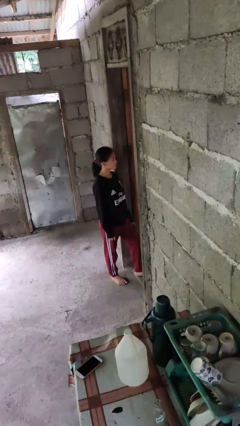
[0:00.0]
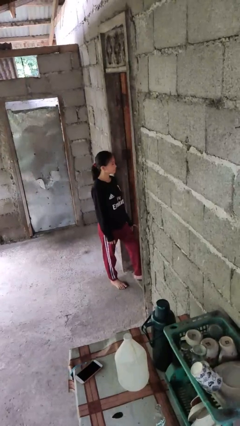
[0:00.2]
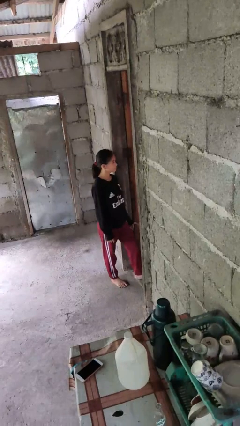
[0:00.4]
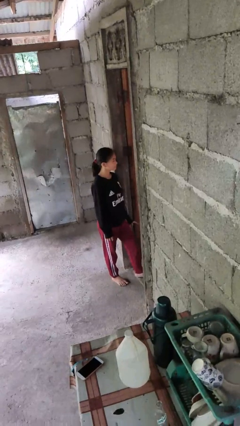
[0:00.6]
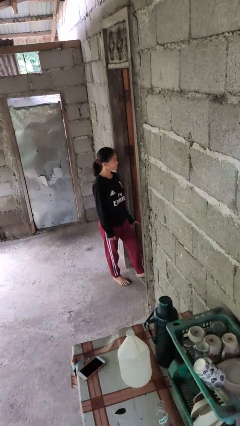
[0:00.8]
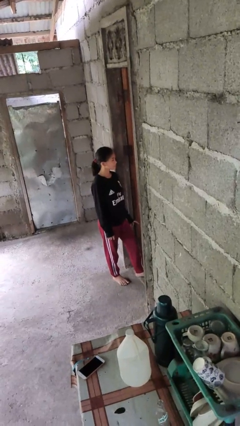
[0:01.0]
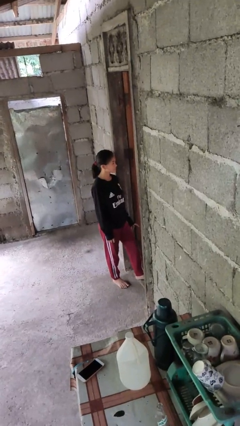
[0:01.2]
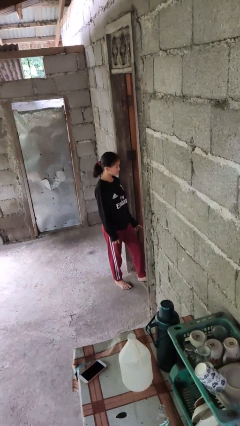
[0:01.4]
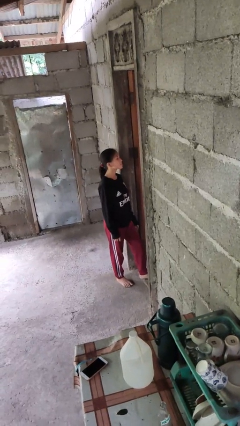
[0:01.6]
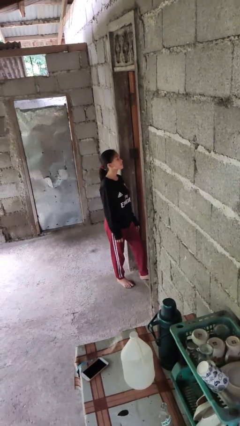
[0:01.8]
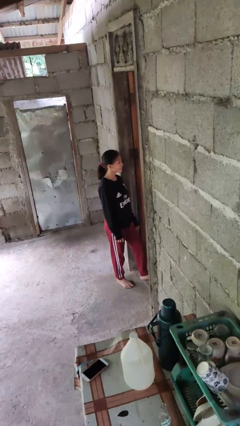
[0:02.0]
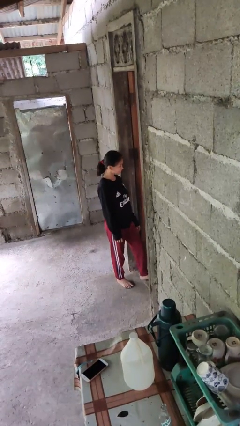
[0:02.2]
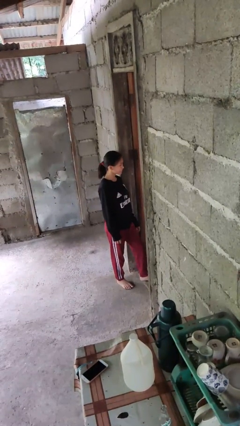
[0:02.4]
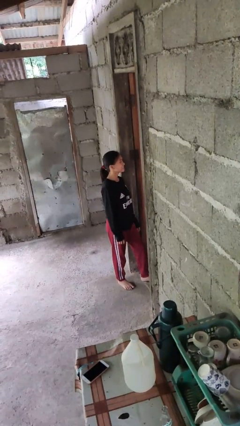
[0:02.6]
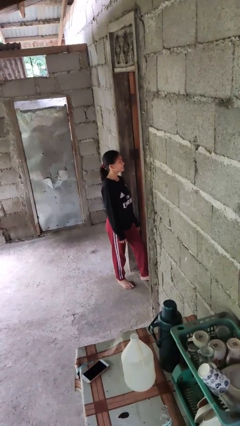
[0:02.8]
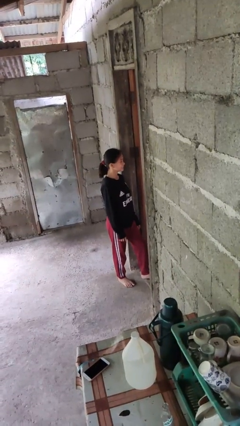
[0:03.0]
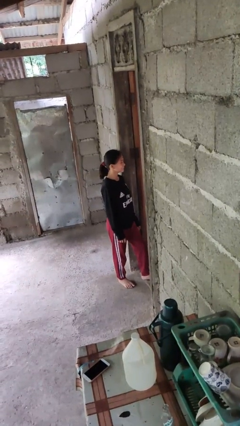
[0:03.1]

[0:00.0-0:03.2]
person nods head

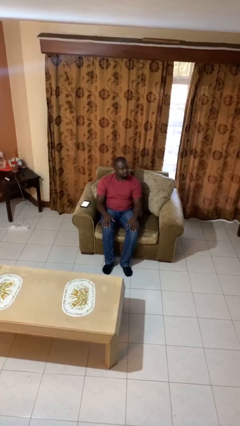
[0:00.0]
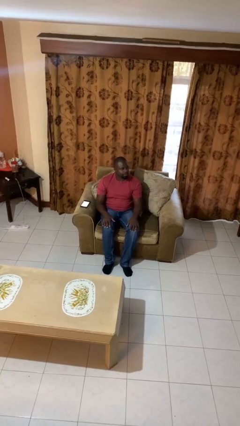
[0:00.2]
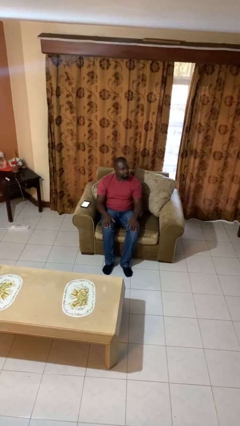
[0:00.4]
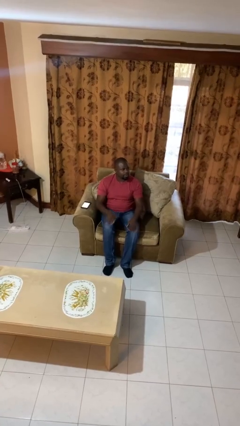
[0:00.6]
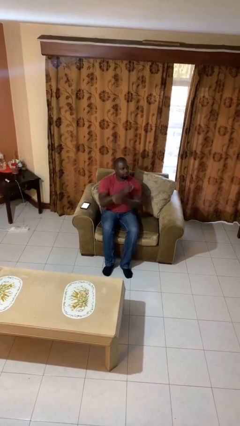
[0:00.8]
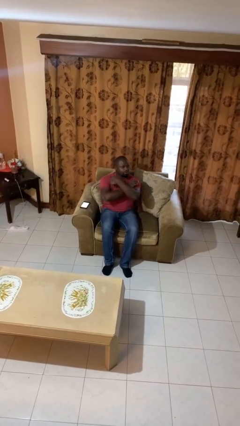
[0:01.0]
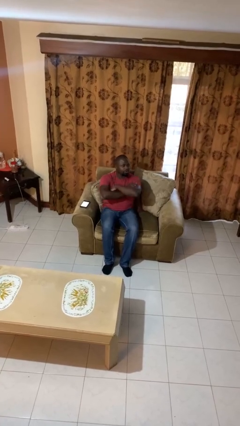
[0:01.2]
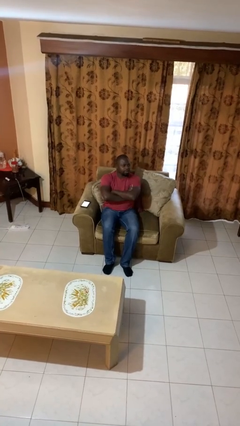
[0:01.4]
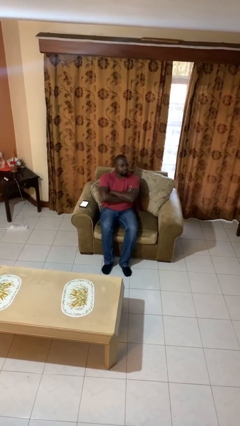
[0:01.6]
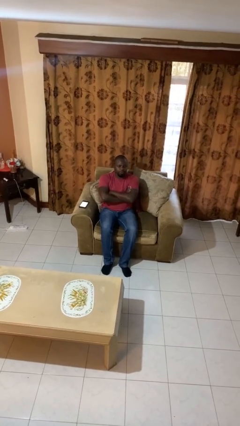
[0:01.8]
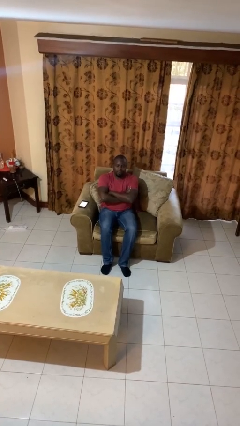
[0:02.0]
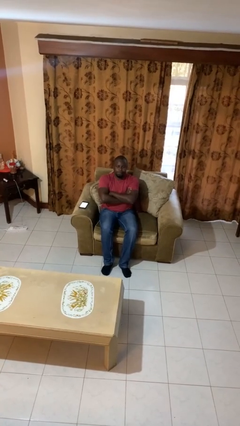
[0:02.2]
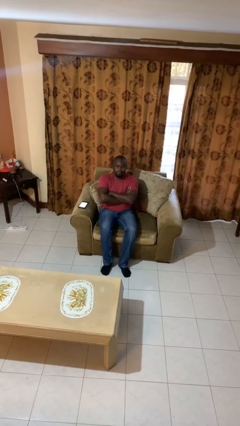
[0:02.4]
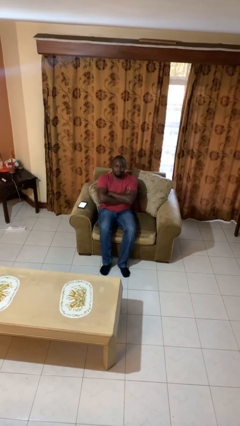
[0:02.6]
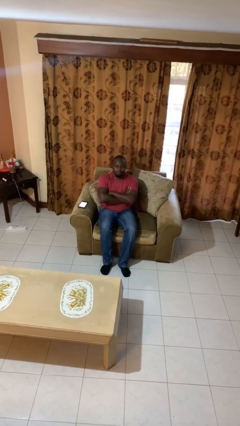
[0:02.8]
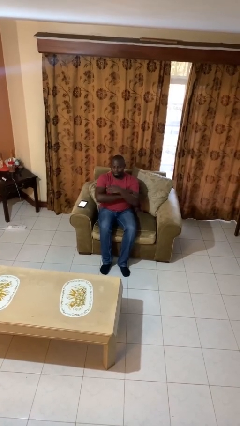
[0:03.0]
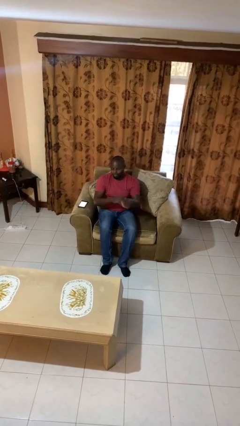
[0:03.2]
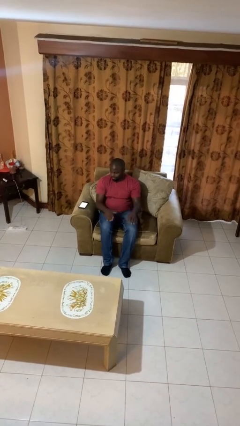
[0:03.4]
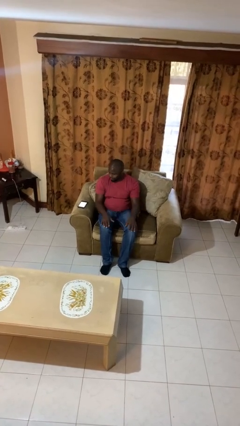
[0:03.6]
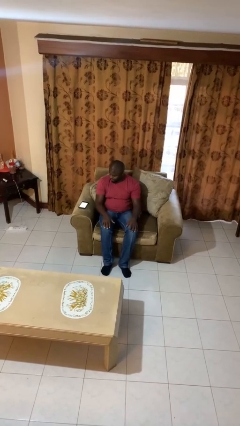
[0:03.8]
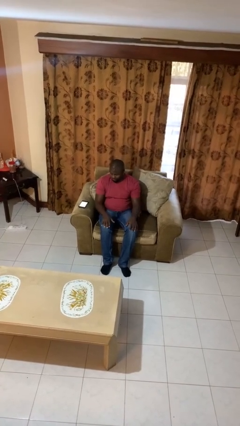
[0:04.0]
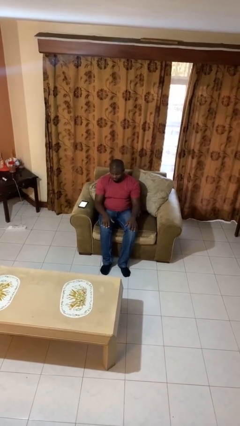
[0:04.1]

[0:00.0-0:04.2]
person crosses arms

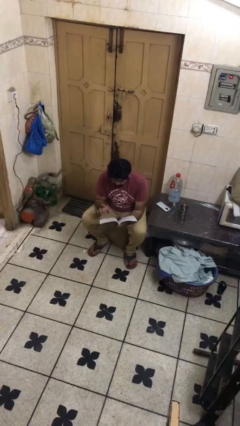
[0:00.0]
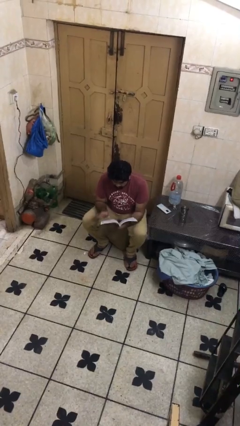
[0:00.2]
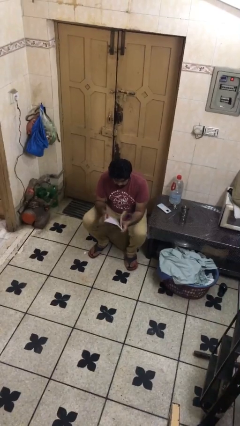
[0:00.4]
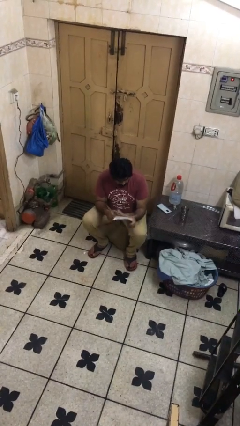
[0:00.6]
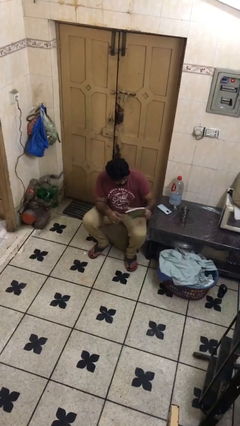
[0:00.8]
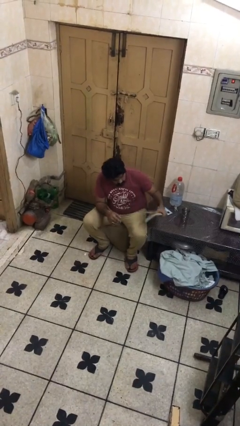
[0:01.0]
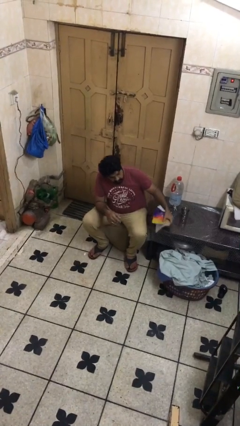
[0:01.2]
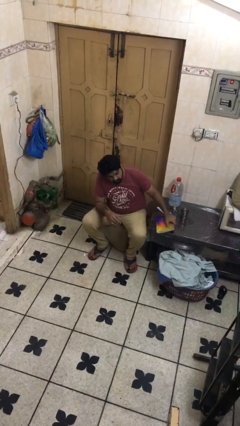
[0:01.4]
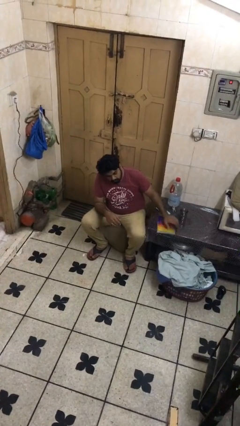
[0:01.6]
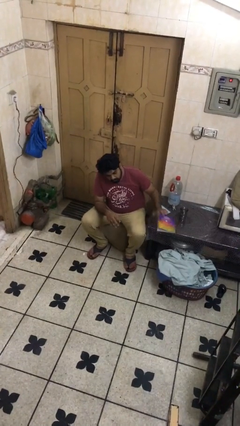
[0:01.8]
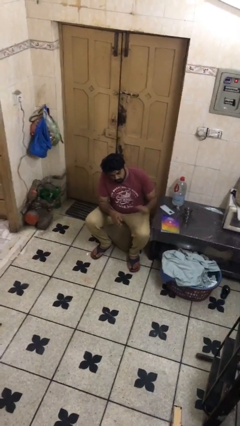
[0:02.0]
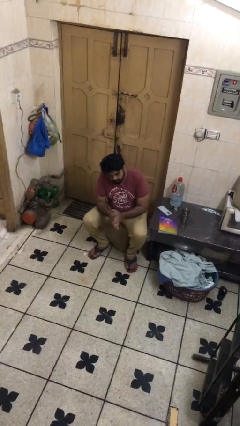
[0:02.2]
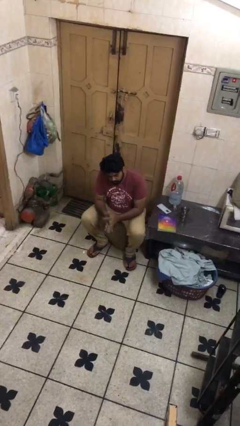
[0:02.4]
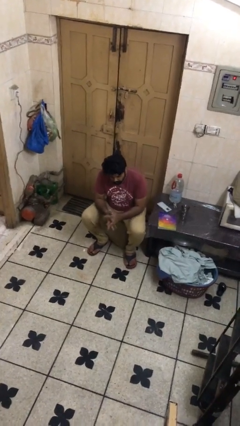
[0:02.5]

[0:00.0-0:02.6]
person puts down object on table

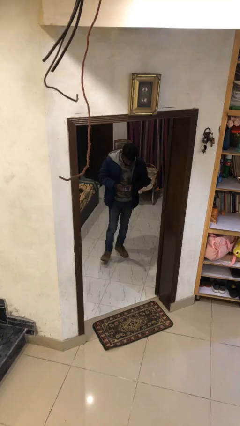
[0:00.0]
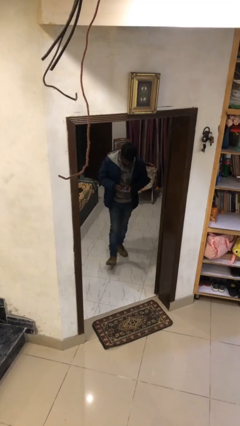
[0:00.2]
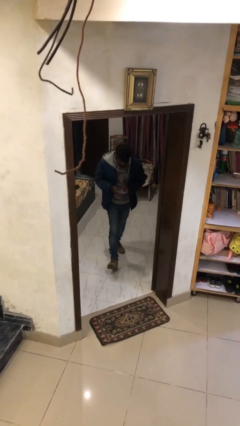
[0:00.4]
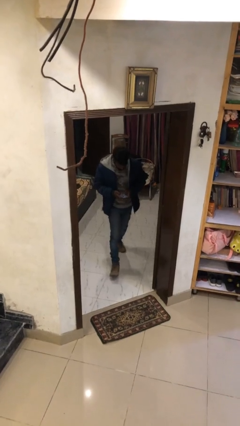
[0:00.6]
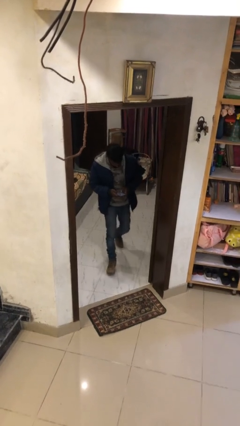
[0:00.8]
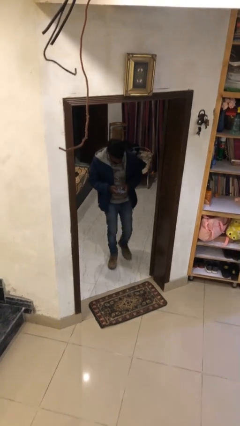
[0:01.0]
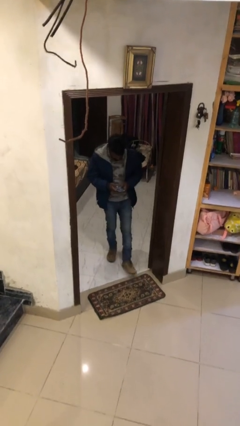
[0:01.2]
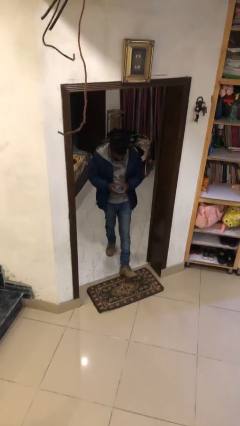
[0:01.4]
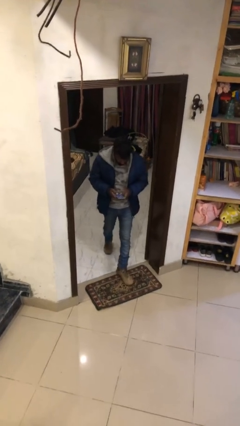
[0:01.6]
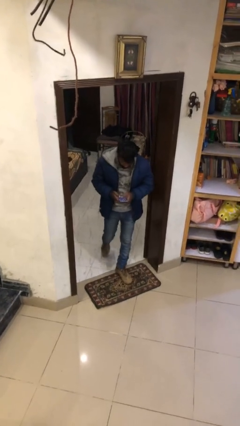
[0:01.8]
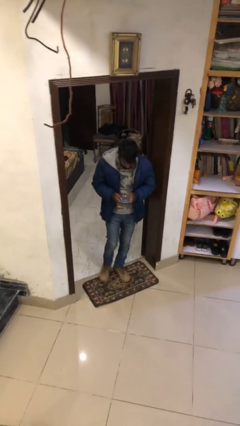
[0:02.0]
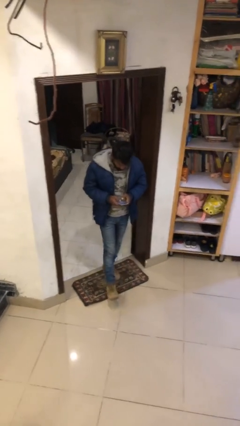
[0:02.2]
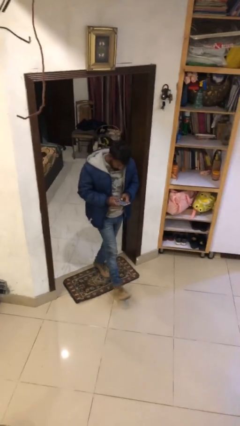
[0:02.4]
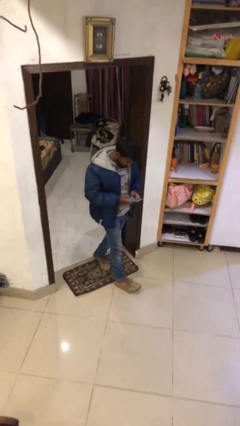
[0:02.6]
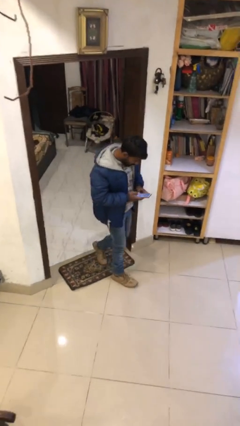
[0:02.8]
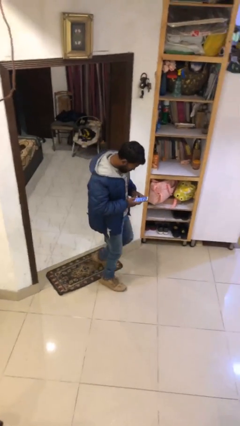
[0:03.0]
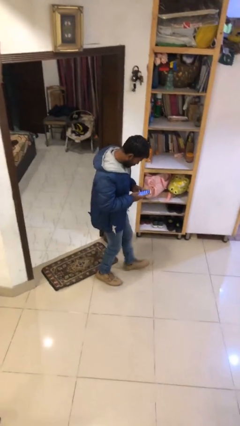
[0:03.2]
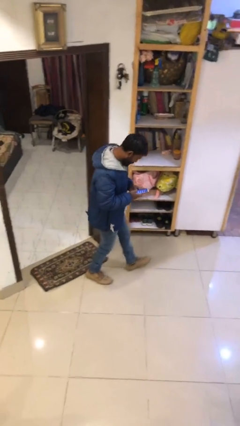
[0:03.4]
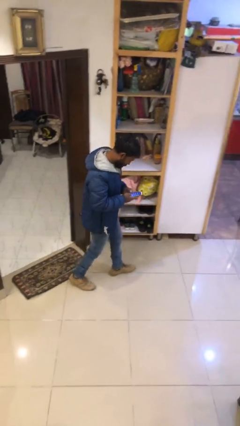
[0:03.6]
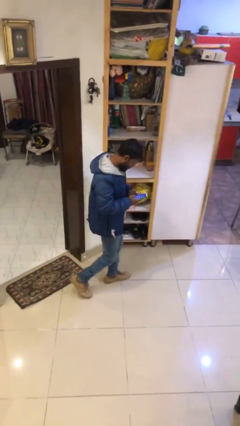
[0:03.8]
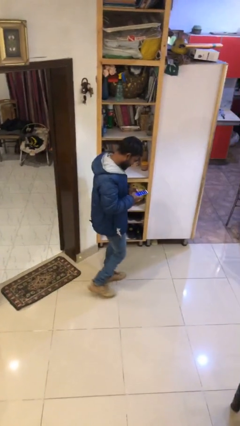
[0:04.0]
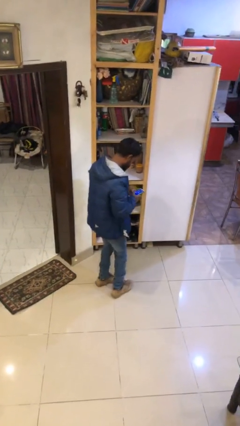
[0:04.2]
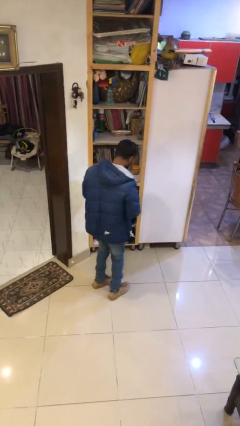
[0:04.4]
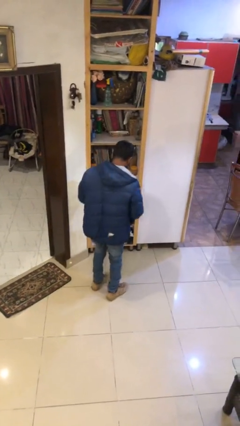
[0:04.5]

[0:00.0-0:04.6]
person enters scene through structure

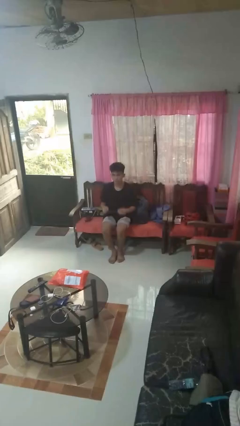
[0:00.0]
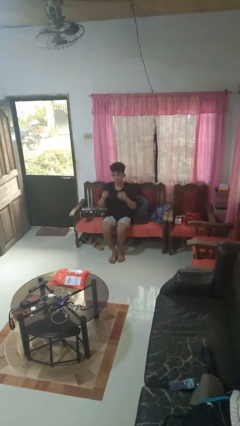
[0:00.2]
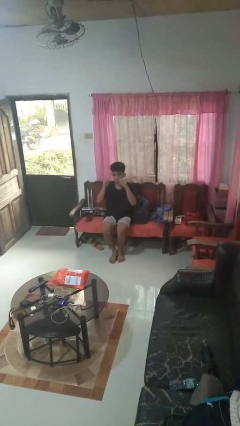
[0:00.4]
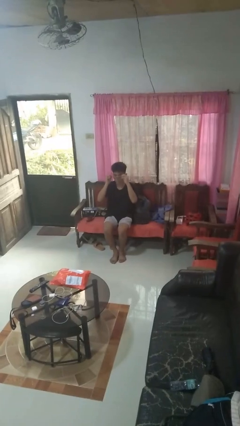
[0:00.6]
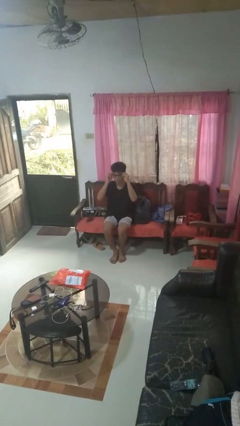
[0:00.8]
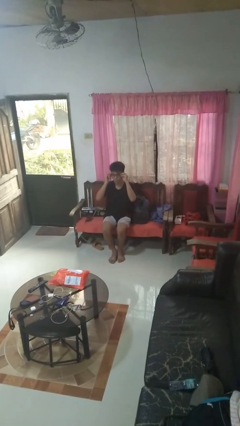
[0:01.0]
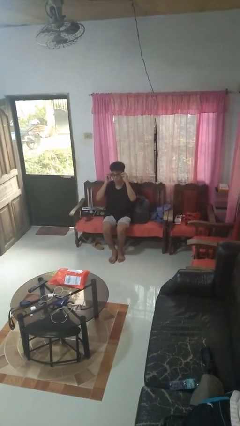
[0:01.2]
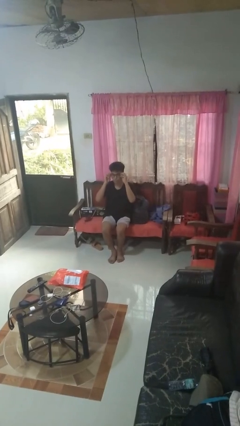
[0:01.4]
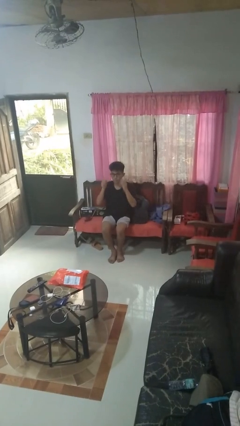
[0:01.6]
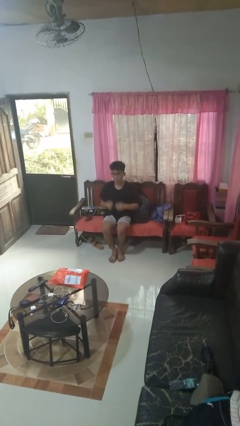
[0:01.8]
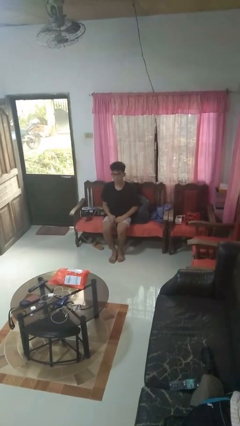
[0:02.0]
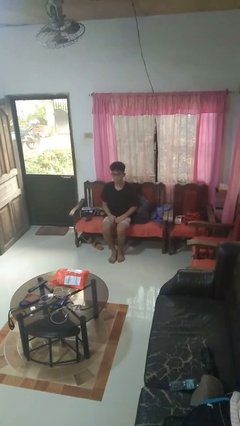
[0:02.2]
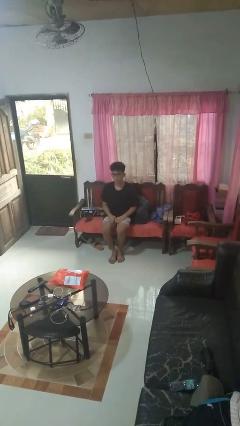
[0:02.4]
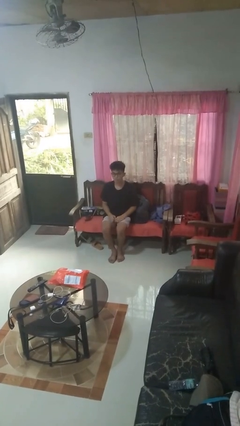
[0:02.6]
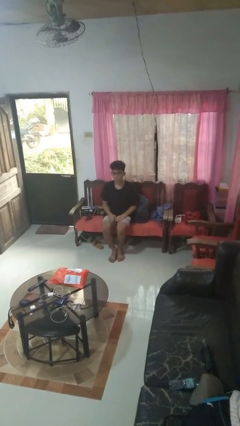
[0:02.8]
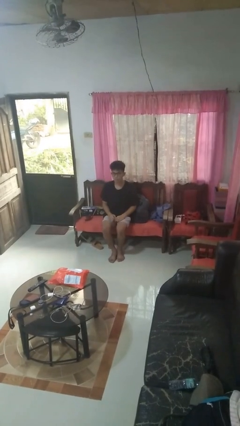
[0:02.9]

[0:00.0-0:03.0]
person puts on glasses

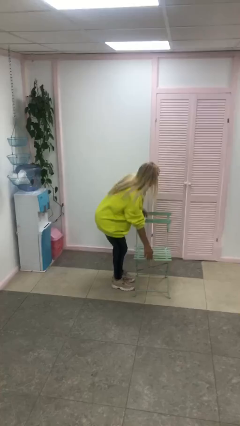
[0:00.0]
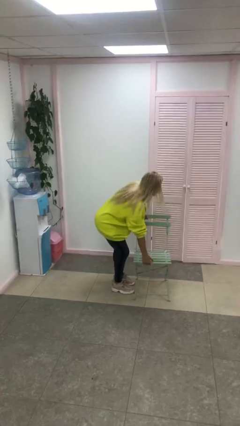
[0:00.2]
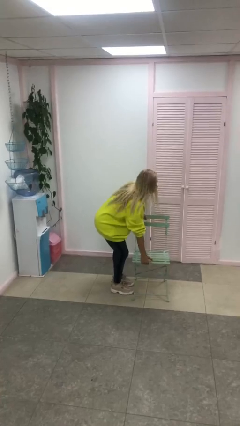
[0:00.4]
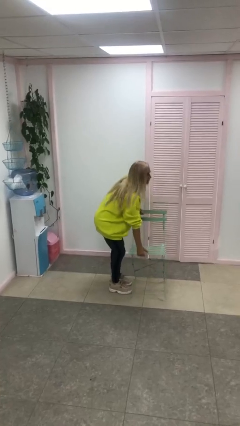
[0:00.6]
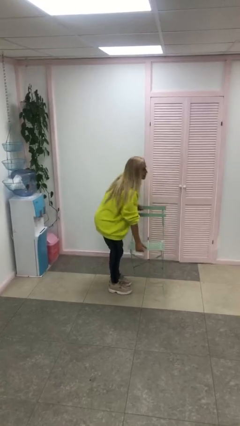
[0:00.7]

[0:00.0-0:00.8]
person picks up object from floor
